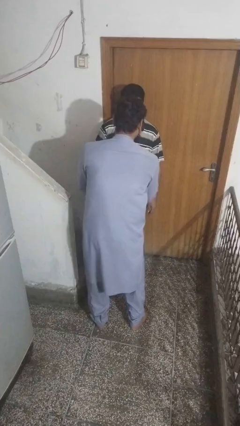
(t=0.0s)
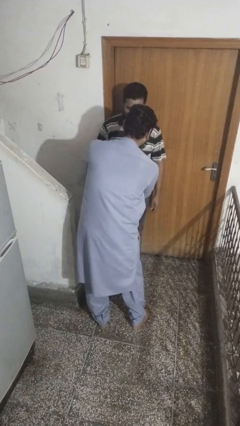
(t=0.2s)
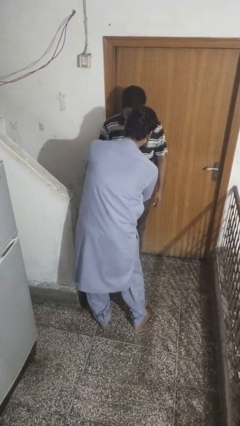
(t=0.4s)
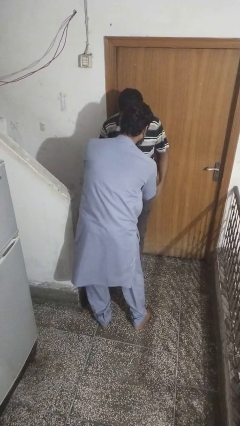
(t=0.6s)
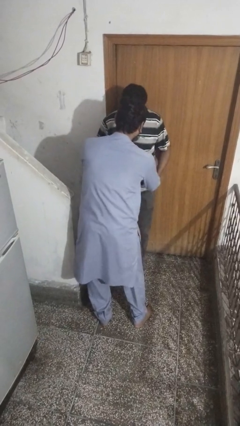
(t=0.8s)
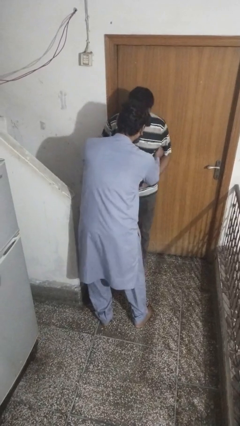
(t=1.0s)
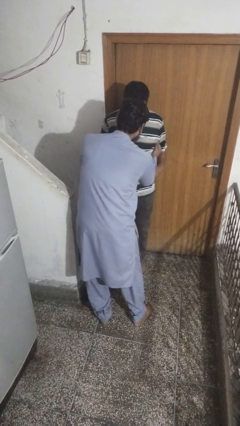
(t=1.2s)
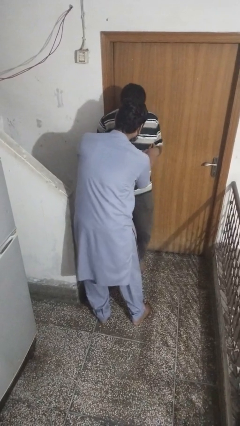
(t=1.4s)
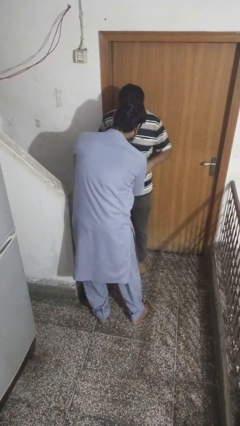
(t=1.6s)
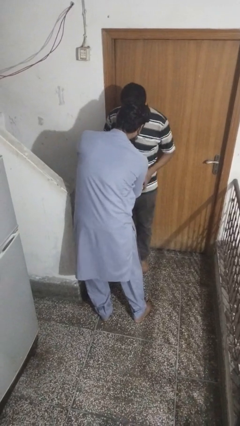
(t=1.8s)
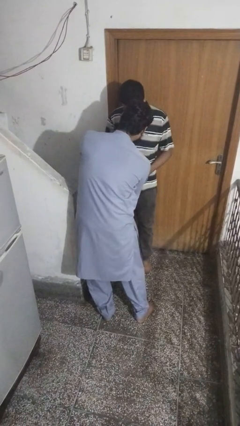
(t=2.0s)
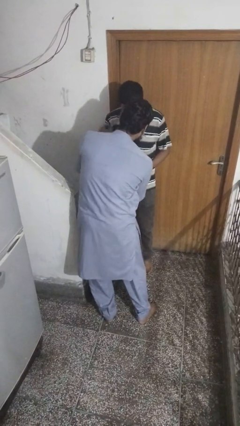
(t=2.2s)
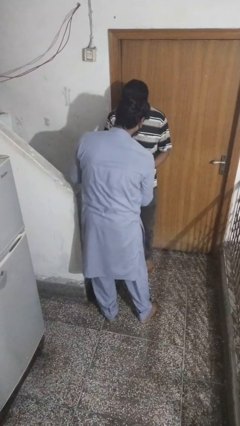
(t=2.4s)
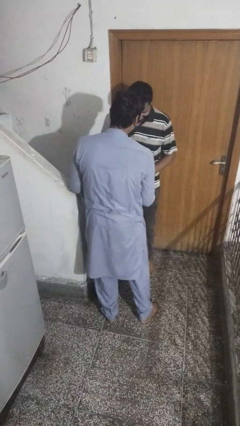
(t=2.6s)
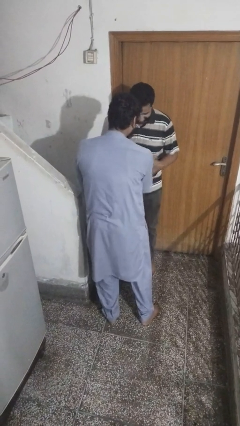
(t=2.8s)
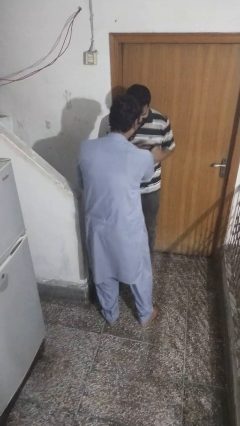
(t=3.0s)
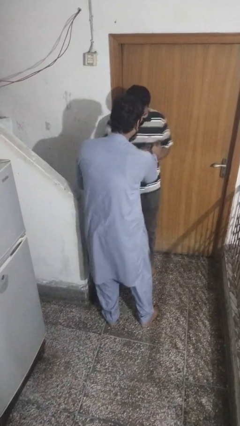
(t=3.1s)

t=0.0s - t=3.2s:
person tickles person

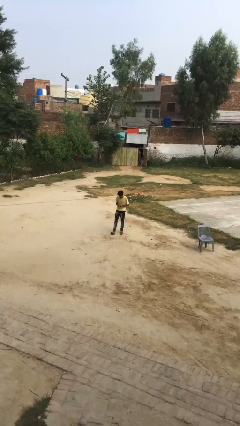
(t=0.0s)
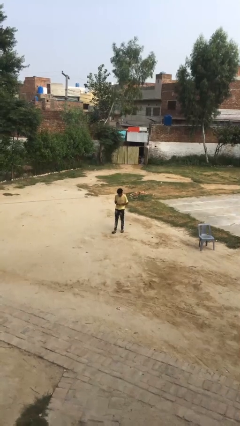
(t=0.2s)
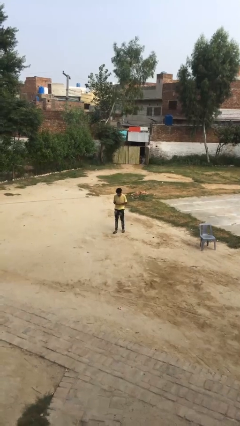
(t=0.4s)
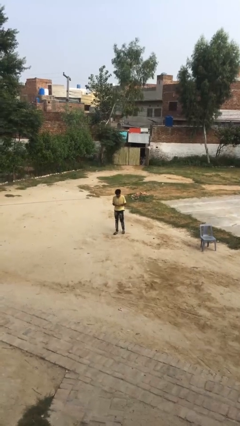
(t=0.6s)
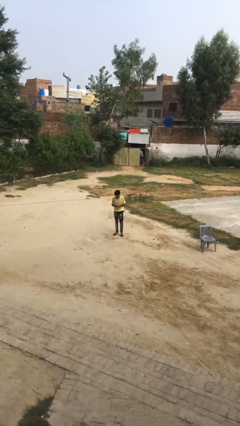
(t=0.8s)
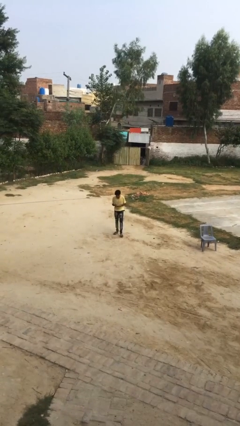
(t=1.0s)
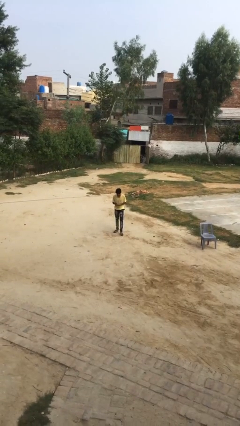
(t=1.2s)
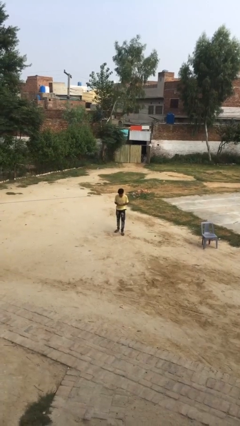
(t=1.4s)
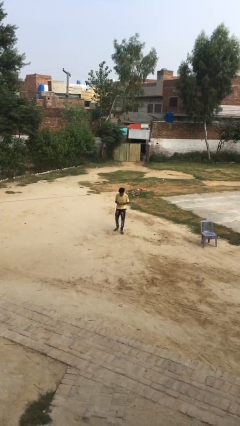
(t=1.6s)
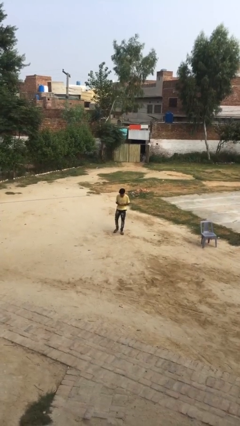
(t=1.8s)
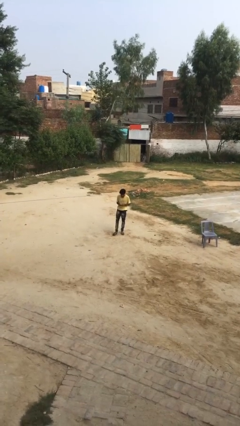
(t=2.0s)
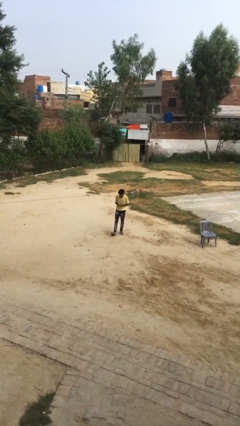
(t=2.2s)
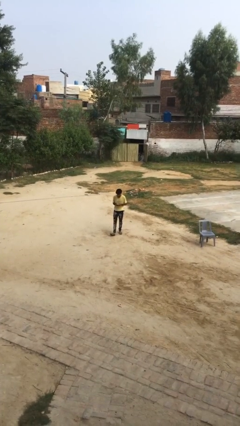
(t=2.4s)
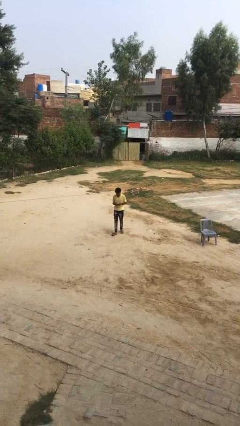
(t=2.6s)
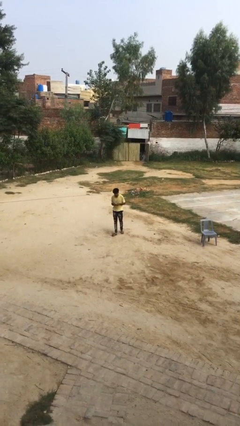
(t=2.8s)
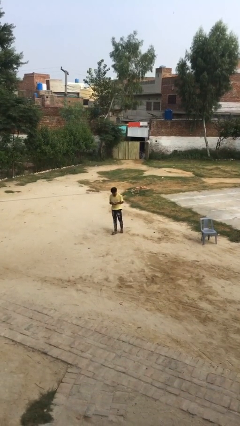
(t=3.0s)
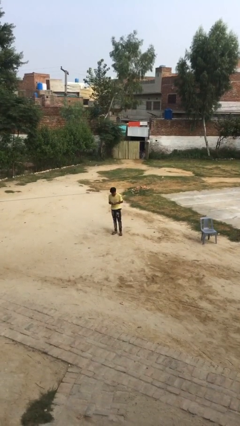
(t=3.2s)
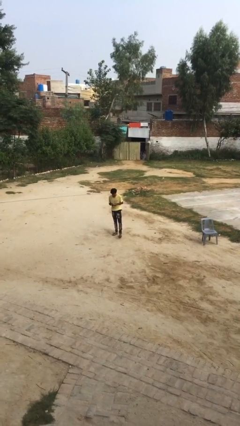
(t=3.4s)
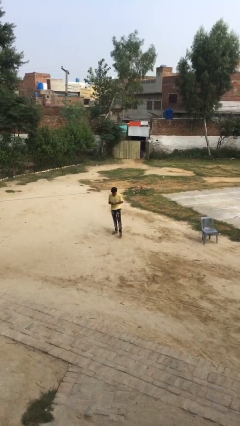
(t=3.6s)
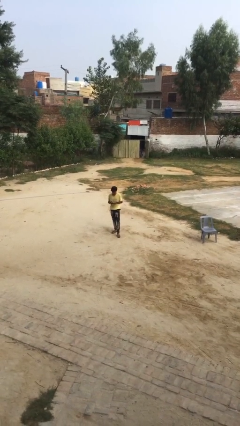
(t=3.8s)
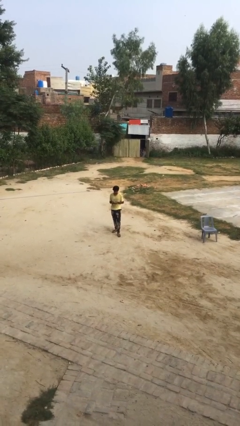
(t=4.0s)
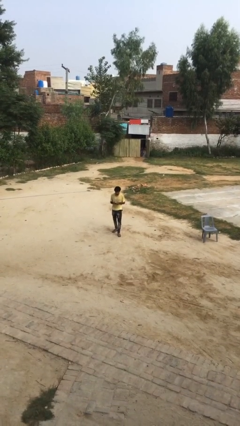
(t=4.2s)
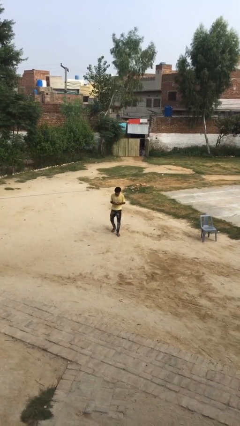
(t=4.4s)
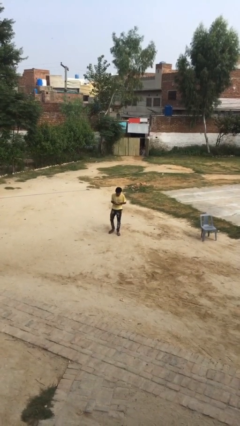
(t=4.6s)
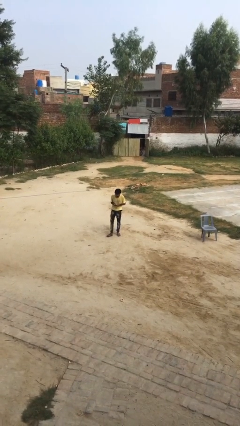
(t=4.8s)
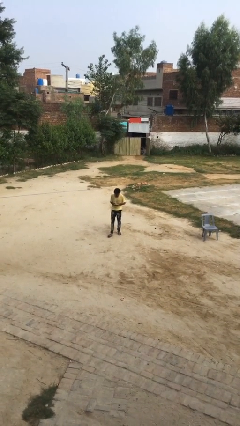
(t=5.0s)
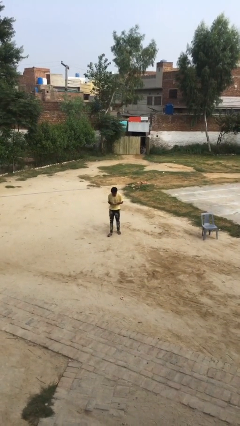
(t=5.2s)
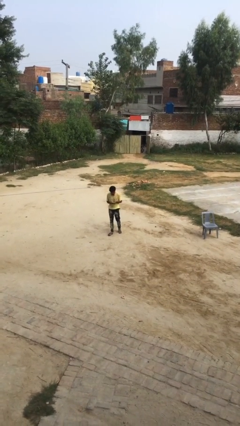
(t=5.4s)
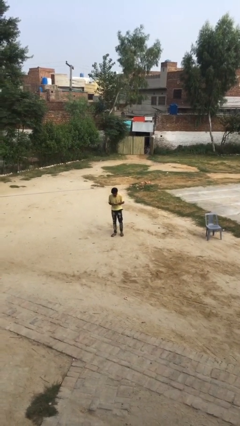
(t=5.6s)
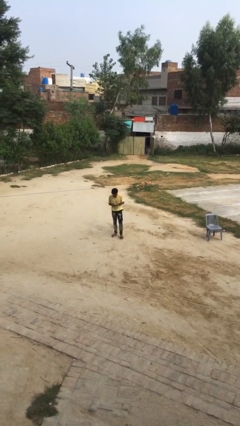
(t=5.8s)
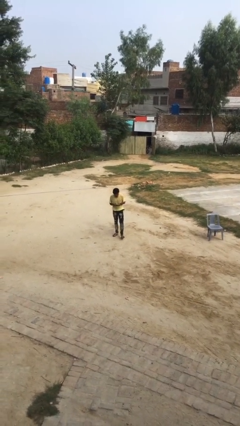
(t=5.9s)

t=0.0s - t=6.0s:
person texts on phone

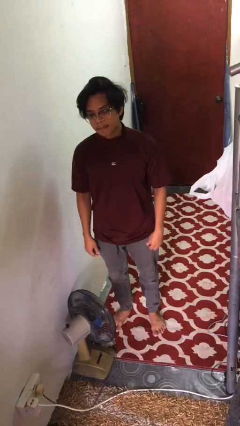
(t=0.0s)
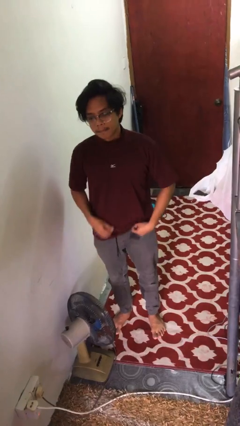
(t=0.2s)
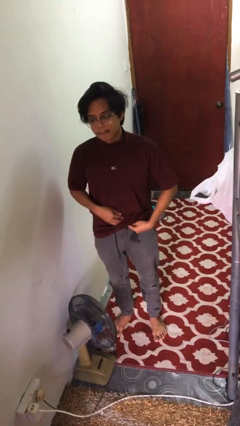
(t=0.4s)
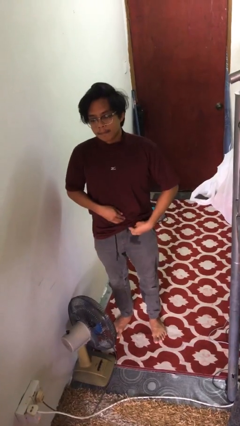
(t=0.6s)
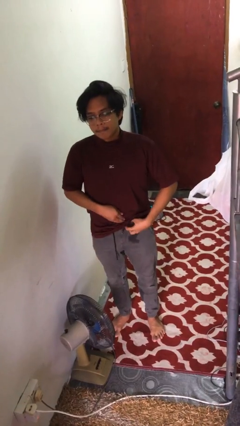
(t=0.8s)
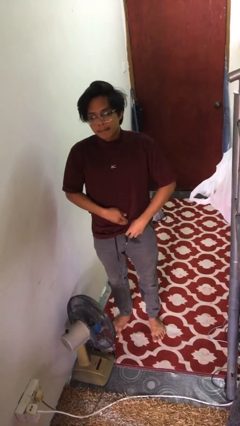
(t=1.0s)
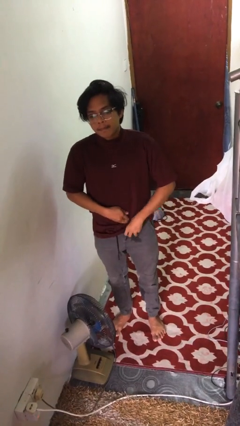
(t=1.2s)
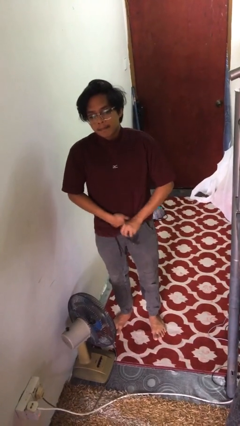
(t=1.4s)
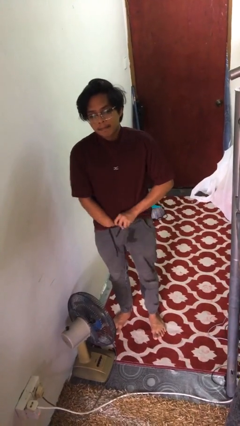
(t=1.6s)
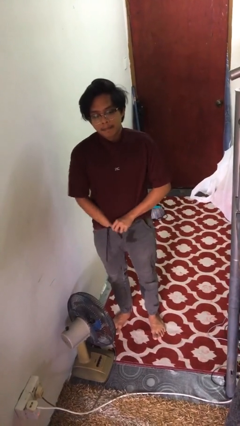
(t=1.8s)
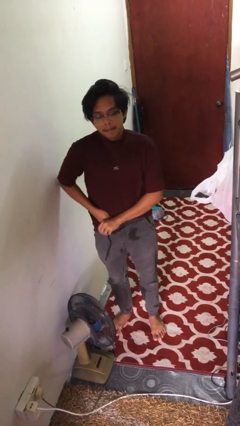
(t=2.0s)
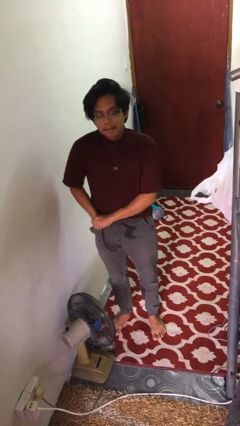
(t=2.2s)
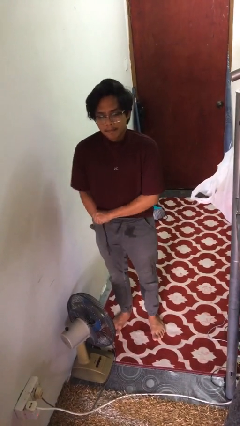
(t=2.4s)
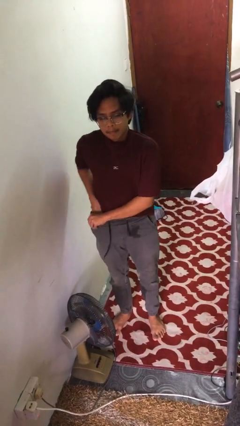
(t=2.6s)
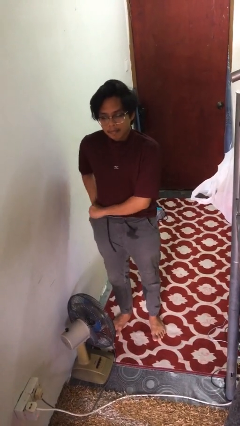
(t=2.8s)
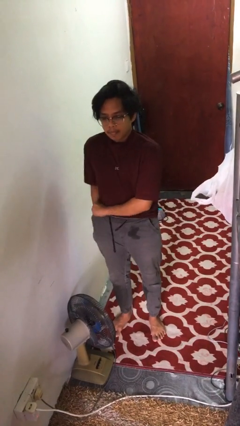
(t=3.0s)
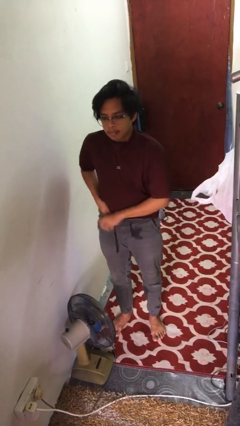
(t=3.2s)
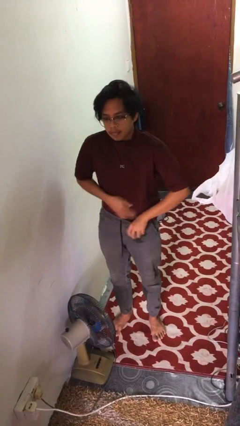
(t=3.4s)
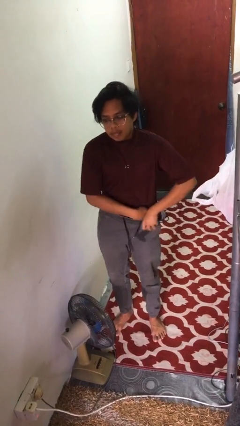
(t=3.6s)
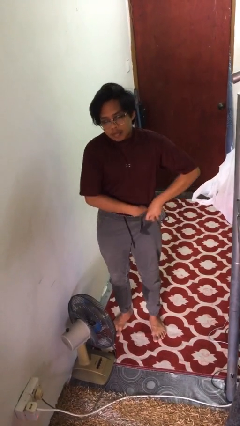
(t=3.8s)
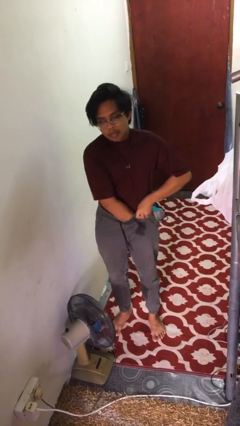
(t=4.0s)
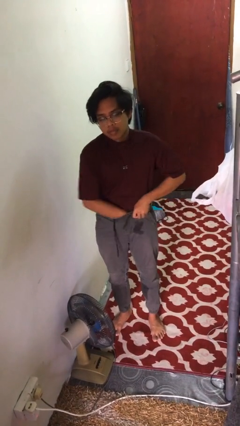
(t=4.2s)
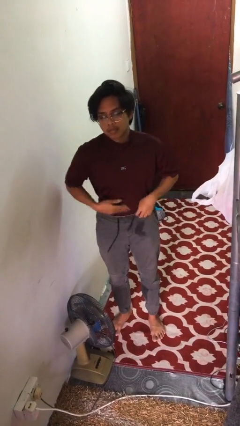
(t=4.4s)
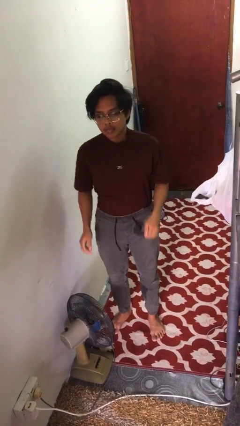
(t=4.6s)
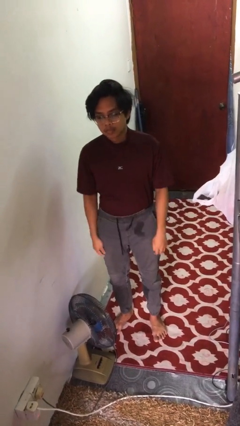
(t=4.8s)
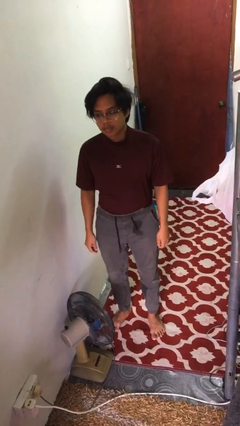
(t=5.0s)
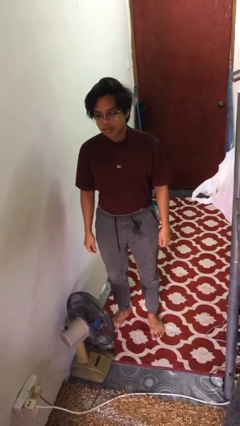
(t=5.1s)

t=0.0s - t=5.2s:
person tucks in shirt

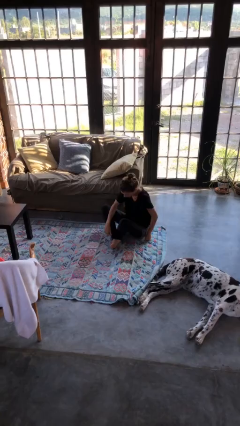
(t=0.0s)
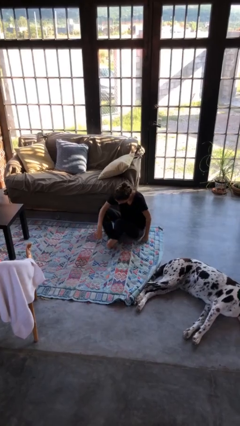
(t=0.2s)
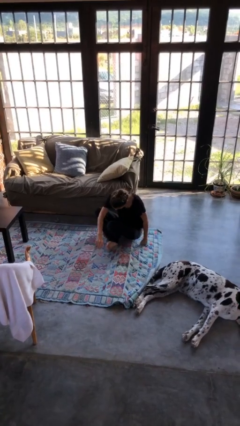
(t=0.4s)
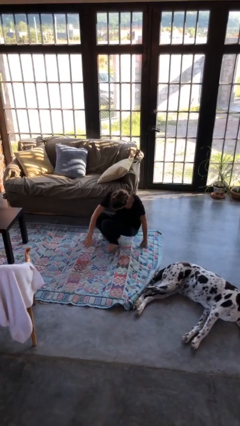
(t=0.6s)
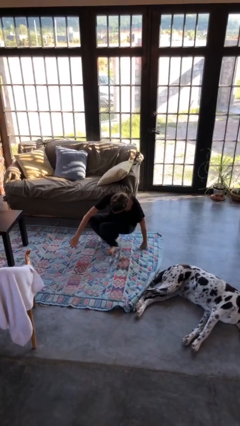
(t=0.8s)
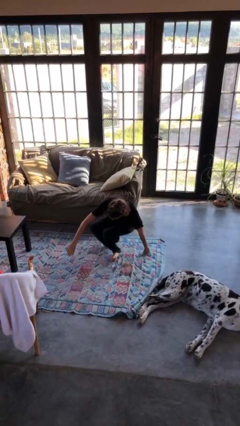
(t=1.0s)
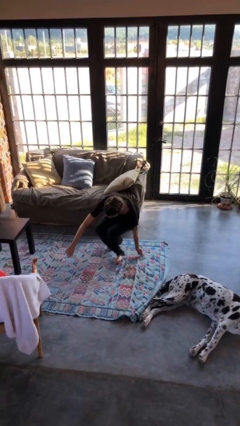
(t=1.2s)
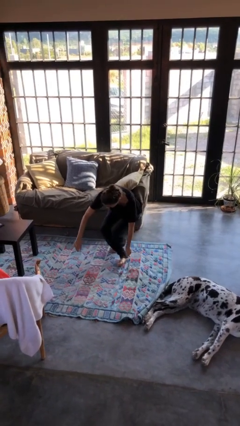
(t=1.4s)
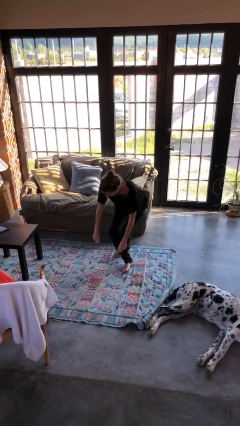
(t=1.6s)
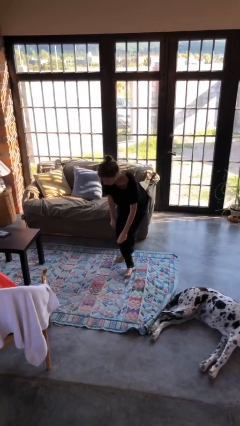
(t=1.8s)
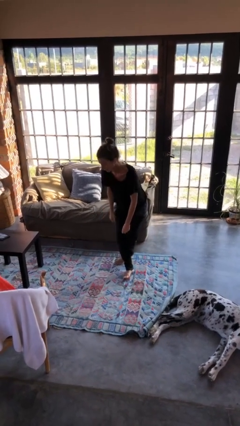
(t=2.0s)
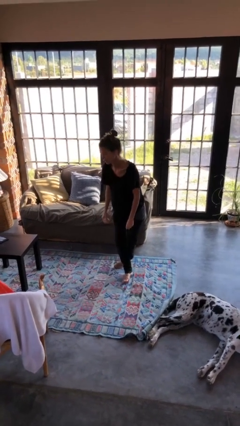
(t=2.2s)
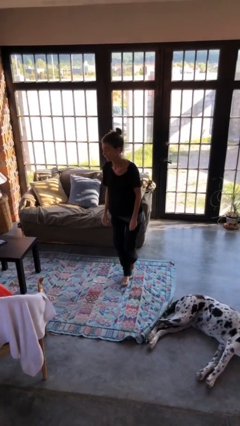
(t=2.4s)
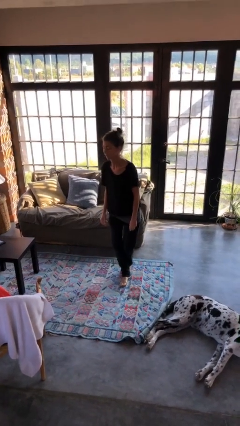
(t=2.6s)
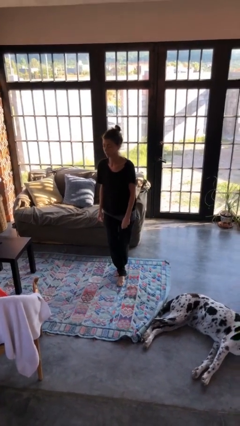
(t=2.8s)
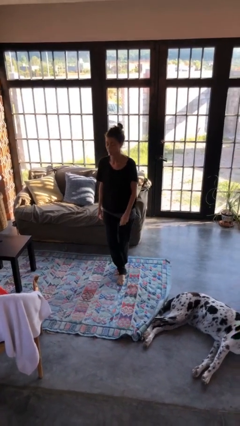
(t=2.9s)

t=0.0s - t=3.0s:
person stands up from floor
